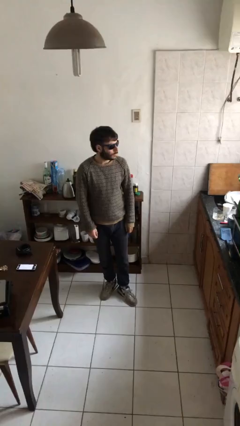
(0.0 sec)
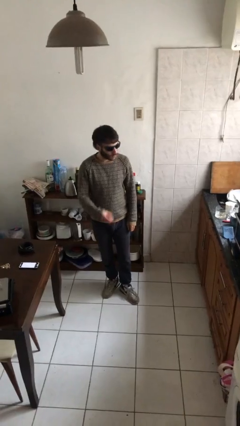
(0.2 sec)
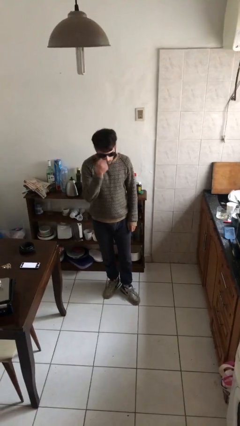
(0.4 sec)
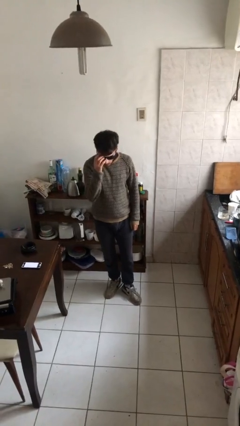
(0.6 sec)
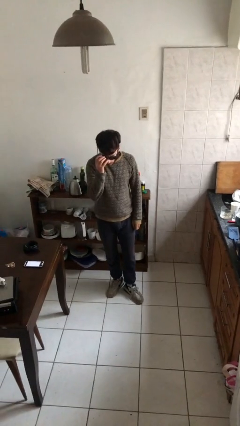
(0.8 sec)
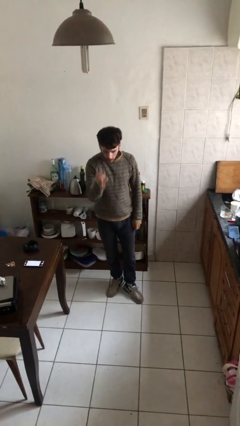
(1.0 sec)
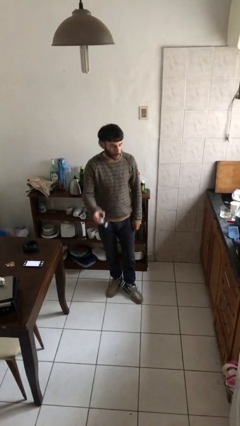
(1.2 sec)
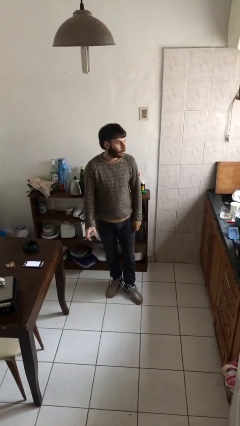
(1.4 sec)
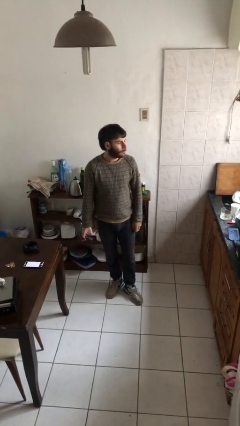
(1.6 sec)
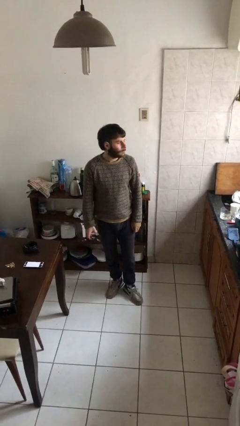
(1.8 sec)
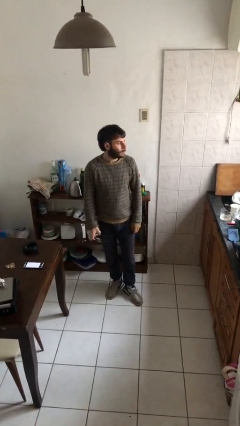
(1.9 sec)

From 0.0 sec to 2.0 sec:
person takes off sunglasses

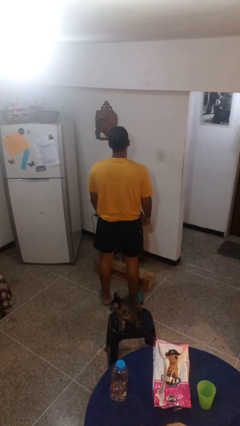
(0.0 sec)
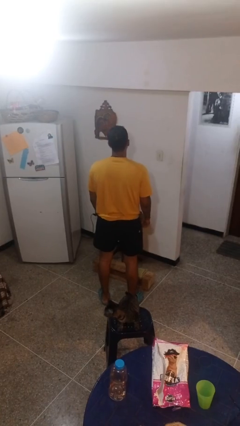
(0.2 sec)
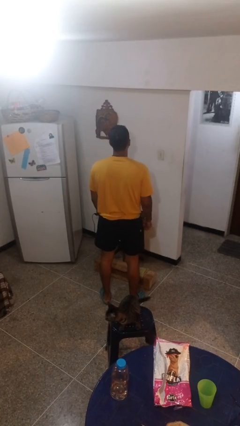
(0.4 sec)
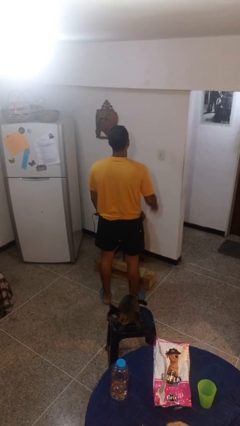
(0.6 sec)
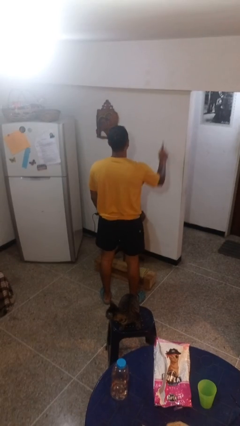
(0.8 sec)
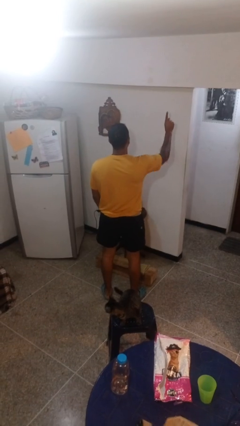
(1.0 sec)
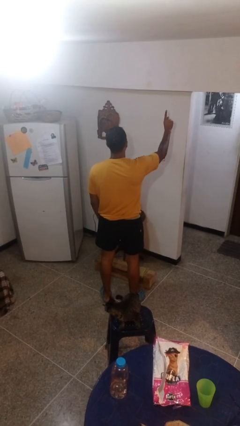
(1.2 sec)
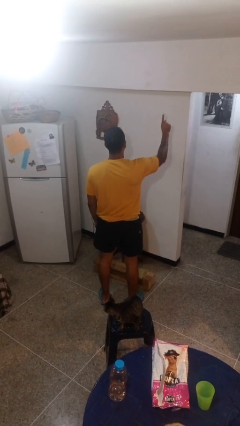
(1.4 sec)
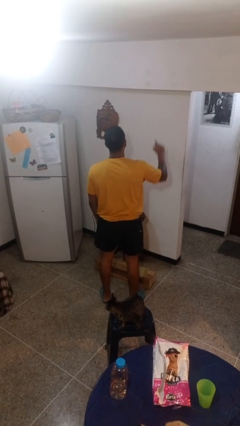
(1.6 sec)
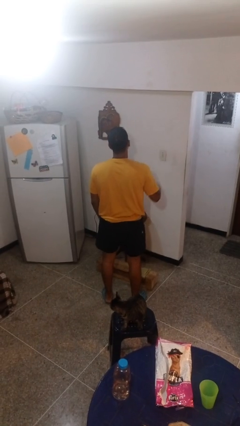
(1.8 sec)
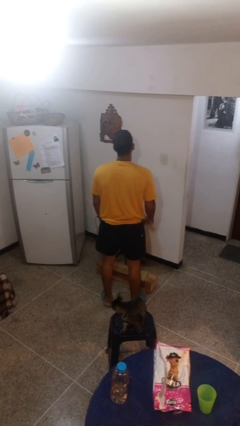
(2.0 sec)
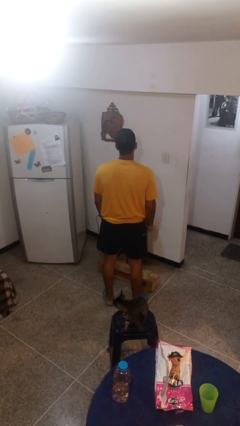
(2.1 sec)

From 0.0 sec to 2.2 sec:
person gestures number one

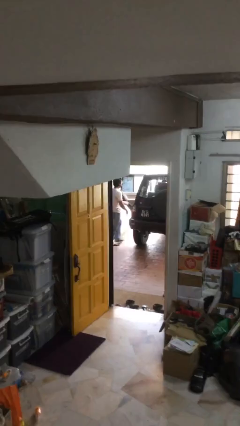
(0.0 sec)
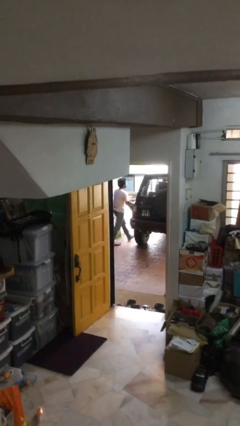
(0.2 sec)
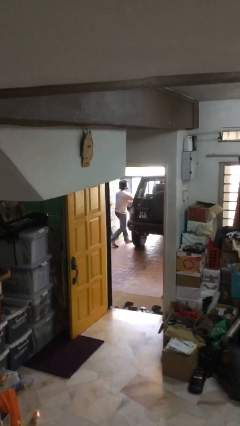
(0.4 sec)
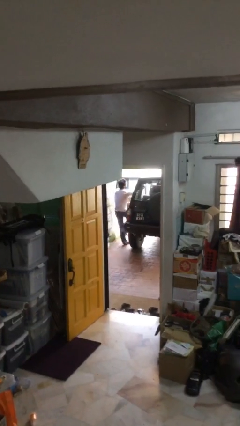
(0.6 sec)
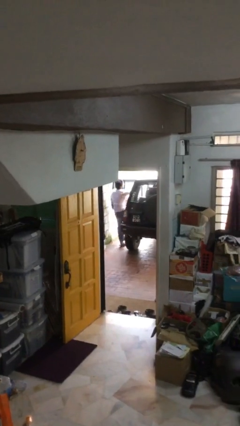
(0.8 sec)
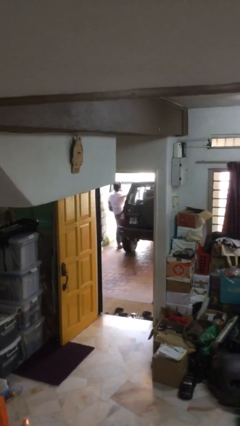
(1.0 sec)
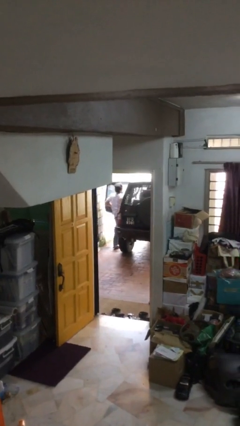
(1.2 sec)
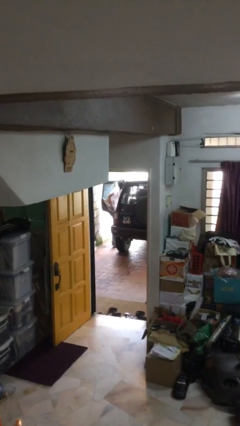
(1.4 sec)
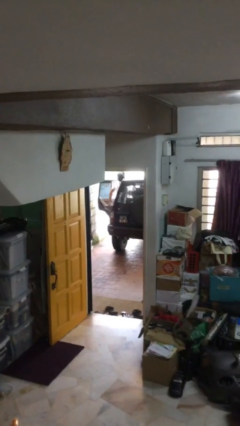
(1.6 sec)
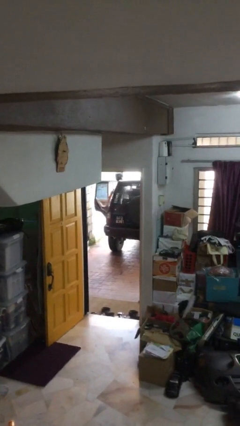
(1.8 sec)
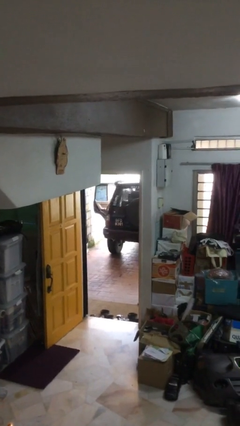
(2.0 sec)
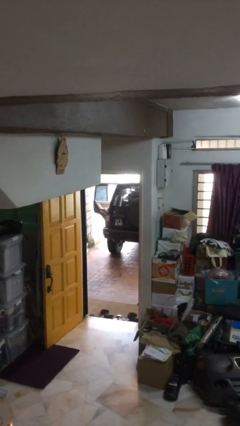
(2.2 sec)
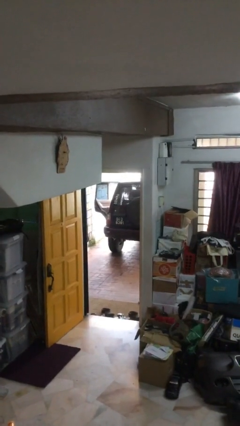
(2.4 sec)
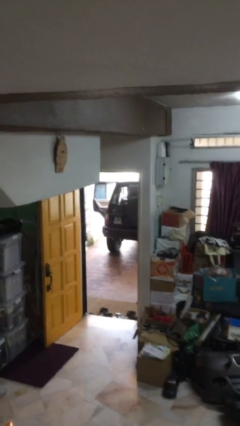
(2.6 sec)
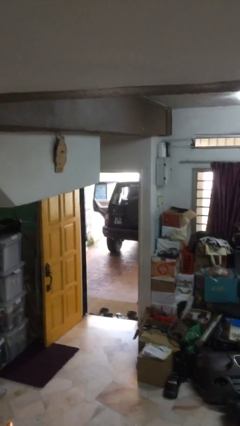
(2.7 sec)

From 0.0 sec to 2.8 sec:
person enters car

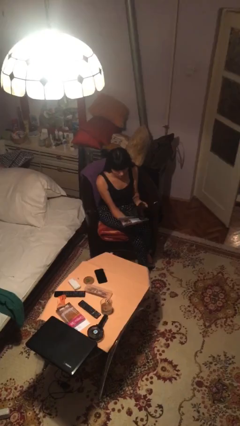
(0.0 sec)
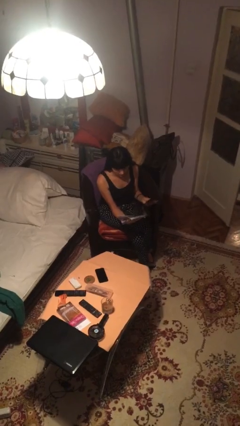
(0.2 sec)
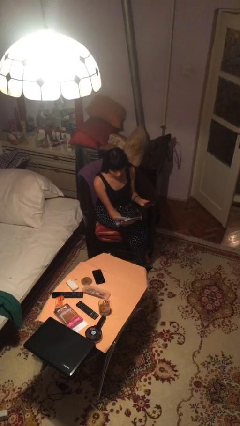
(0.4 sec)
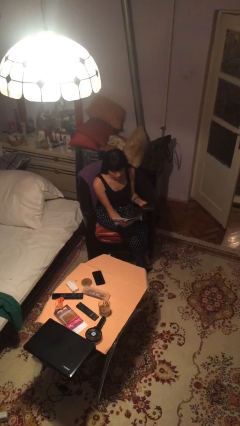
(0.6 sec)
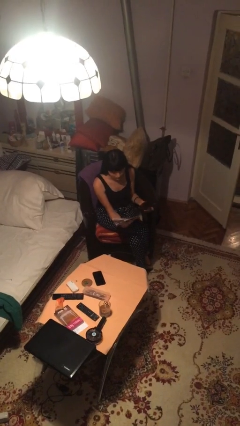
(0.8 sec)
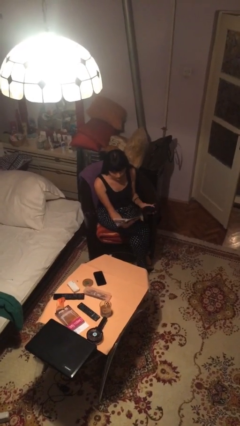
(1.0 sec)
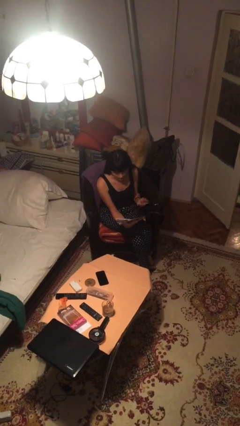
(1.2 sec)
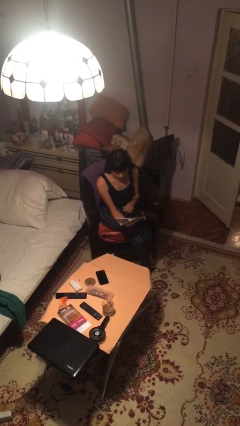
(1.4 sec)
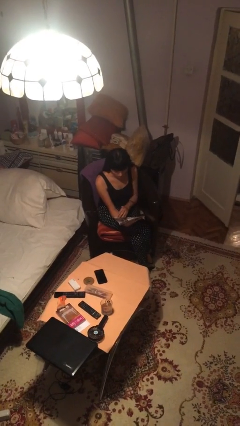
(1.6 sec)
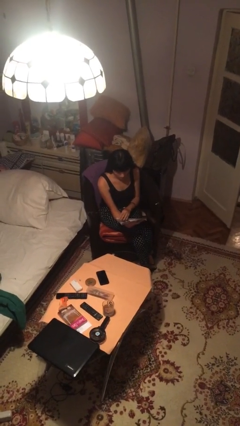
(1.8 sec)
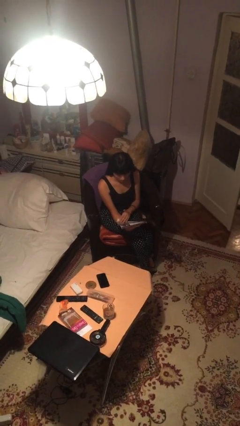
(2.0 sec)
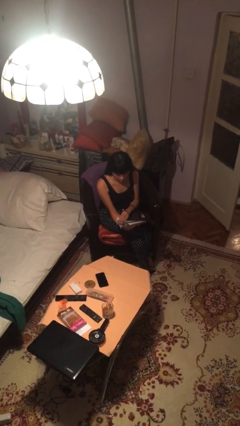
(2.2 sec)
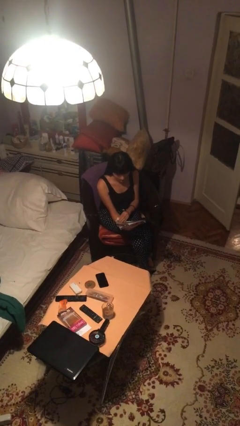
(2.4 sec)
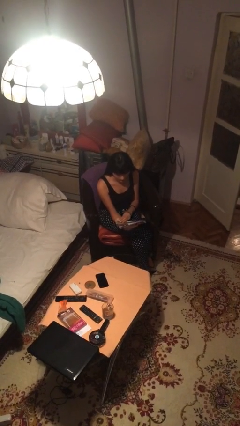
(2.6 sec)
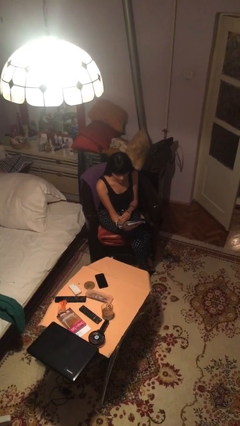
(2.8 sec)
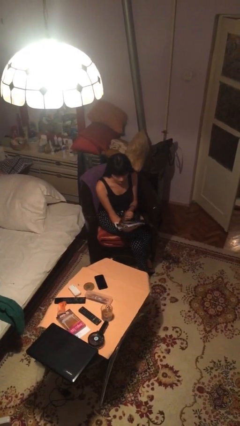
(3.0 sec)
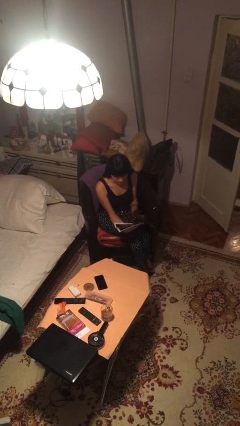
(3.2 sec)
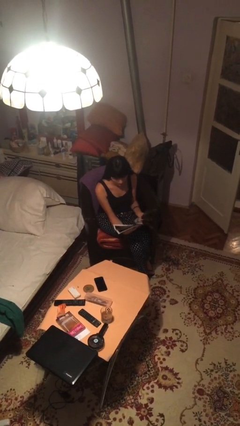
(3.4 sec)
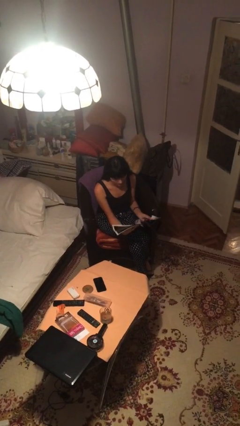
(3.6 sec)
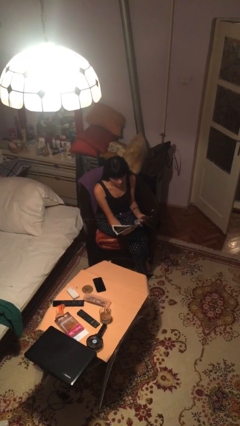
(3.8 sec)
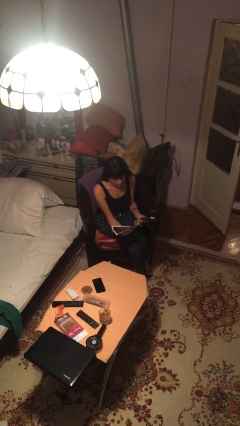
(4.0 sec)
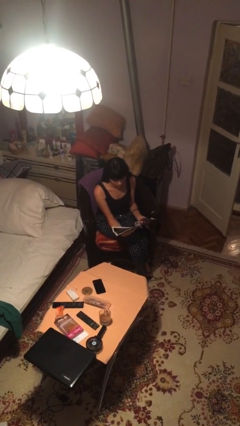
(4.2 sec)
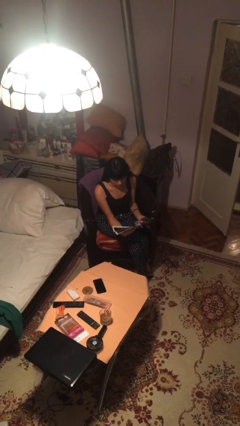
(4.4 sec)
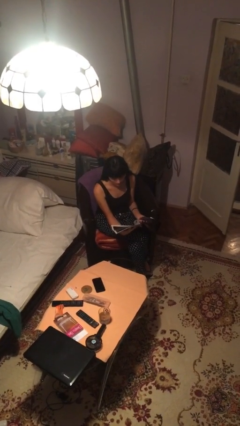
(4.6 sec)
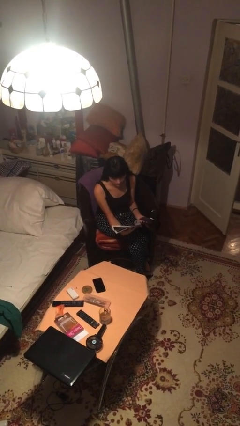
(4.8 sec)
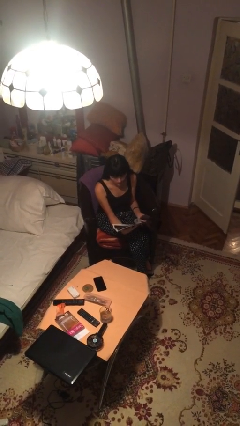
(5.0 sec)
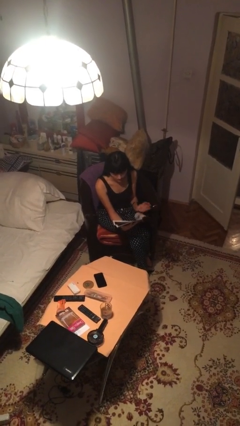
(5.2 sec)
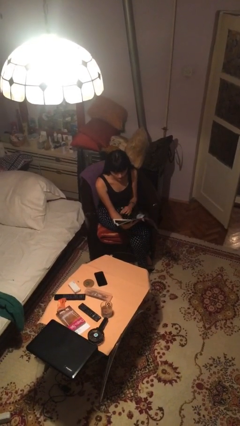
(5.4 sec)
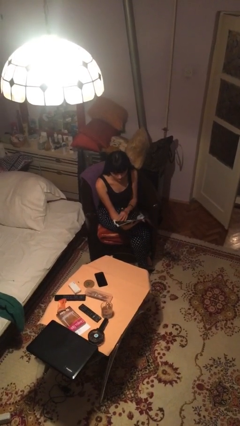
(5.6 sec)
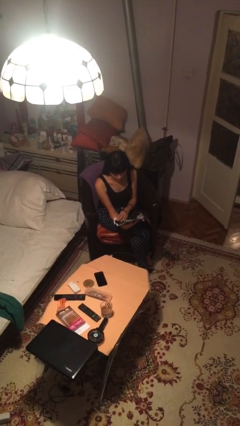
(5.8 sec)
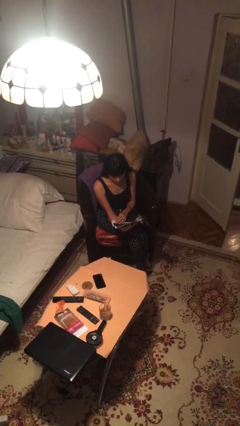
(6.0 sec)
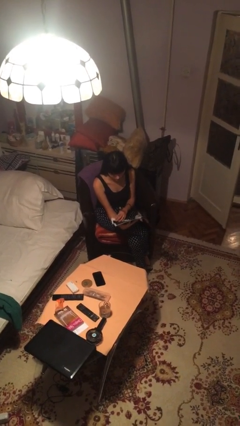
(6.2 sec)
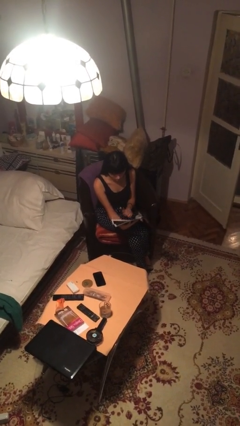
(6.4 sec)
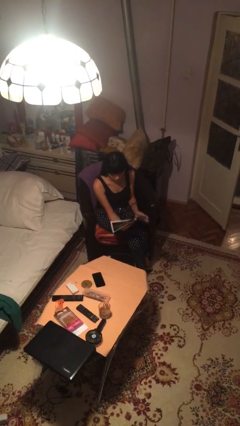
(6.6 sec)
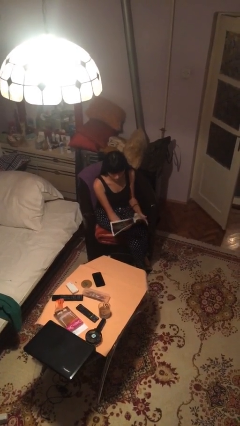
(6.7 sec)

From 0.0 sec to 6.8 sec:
person reads document

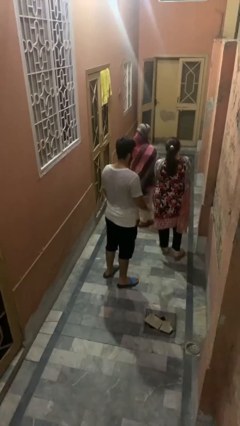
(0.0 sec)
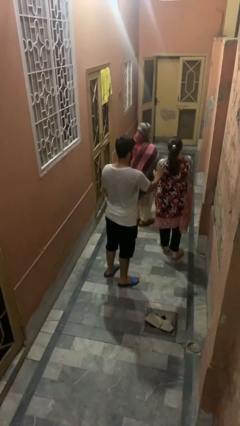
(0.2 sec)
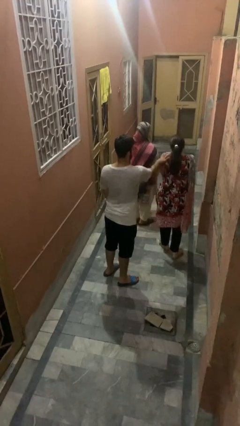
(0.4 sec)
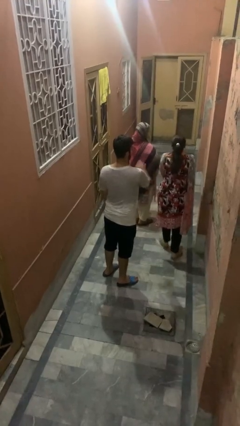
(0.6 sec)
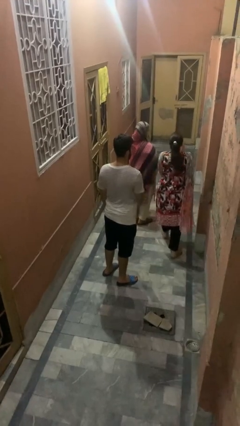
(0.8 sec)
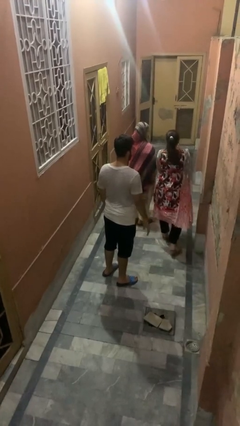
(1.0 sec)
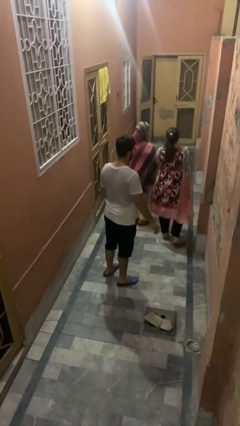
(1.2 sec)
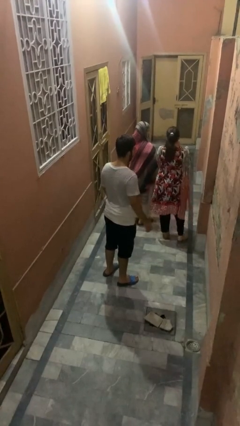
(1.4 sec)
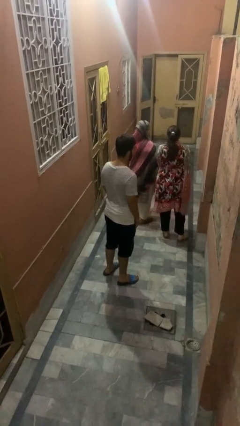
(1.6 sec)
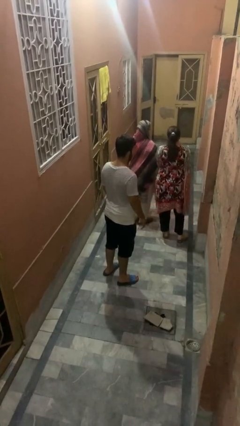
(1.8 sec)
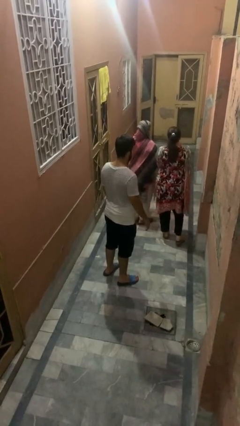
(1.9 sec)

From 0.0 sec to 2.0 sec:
person shoves person

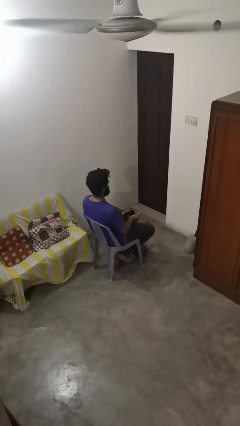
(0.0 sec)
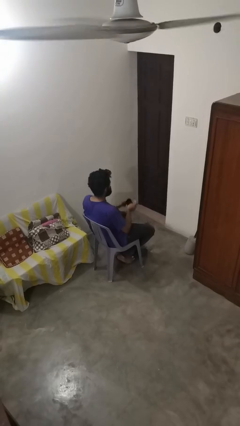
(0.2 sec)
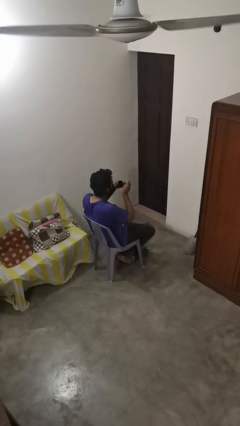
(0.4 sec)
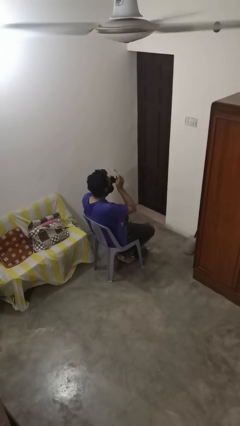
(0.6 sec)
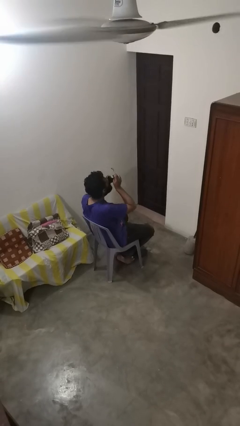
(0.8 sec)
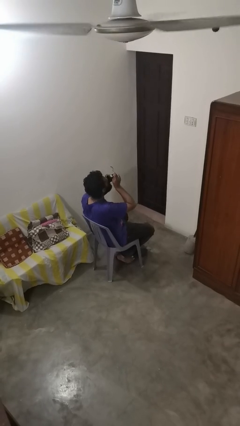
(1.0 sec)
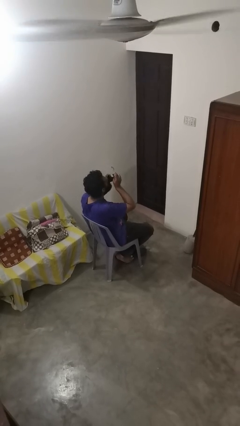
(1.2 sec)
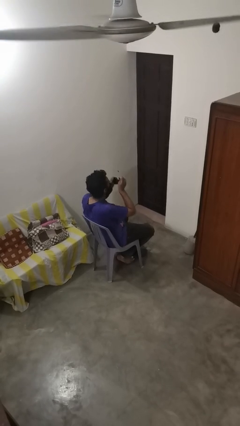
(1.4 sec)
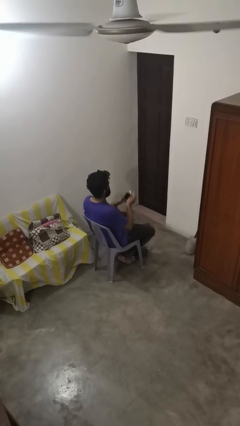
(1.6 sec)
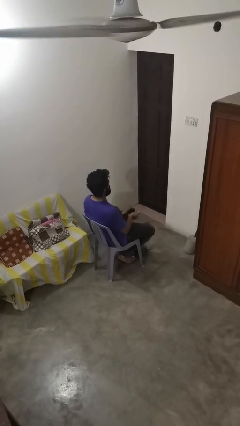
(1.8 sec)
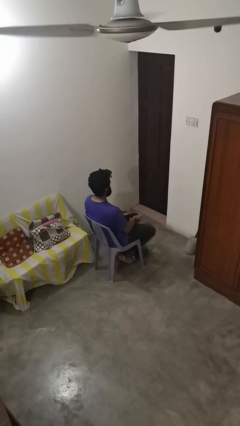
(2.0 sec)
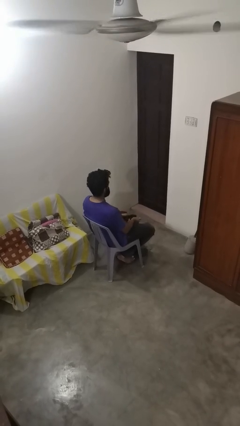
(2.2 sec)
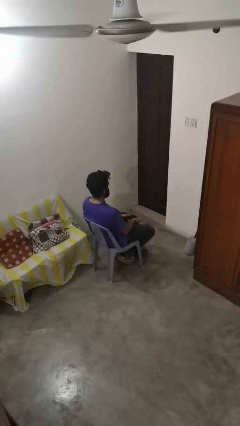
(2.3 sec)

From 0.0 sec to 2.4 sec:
person drinks from mug
